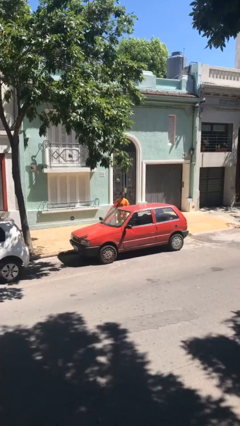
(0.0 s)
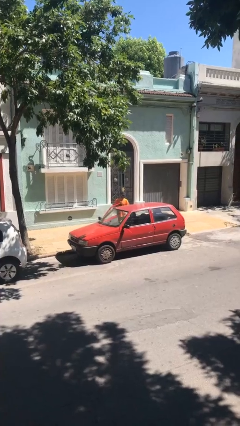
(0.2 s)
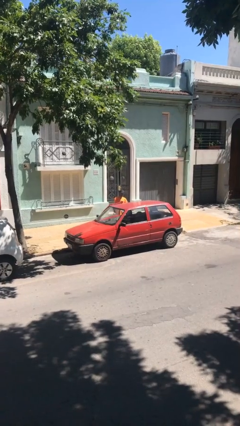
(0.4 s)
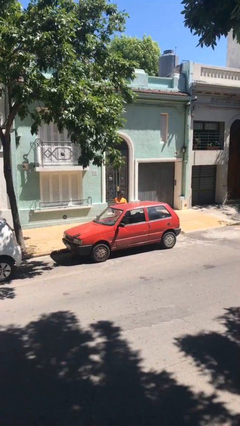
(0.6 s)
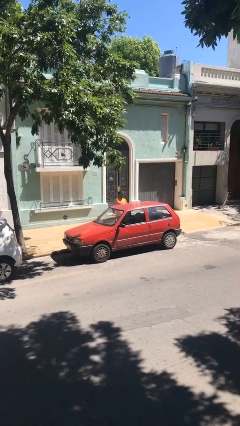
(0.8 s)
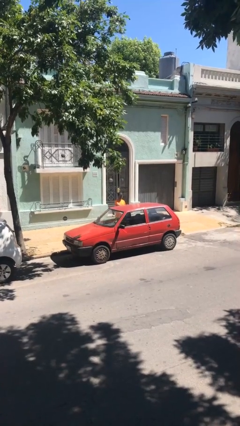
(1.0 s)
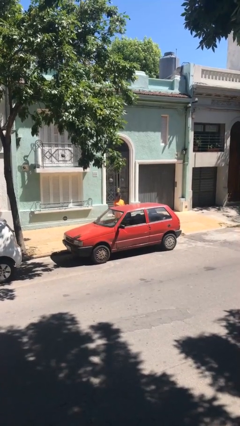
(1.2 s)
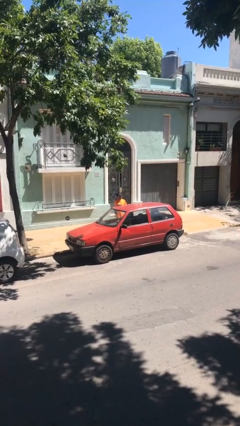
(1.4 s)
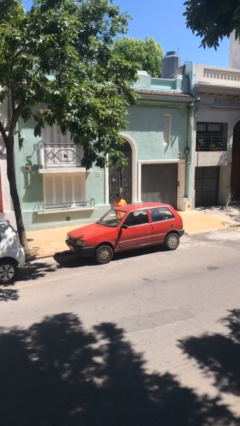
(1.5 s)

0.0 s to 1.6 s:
person closes car door

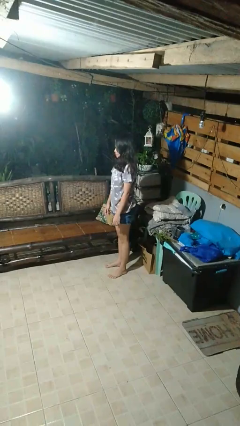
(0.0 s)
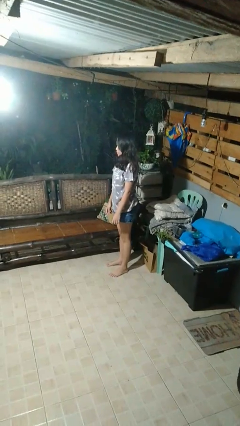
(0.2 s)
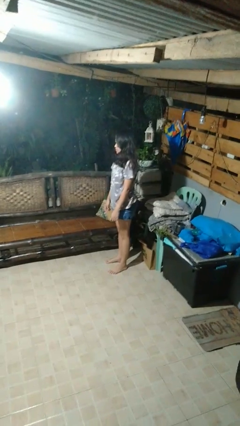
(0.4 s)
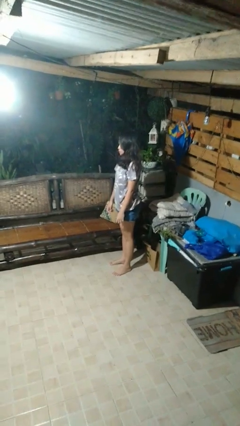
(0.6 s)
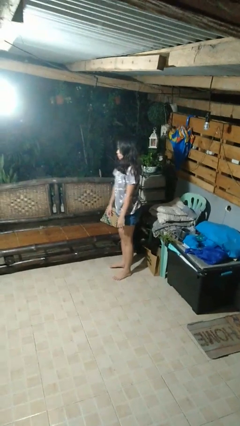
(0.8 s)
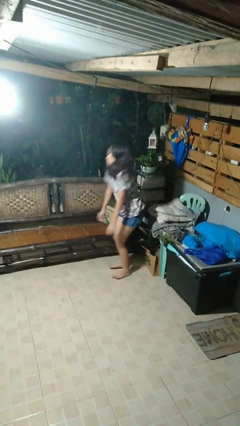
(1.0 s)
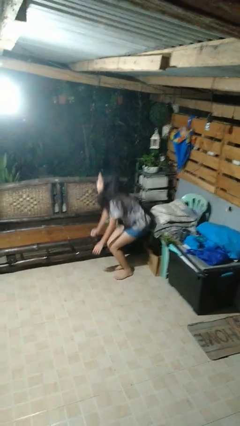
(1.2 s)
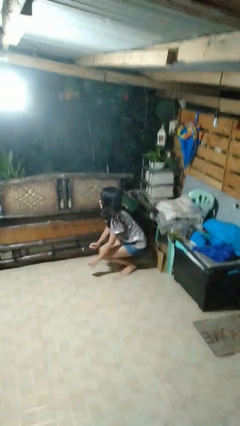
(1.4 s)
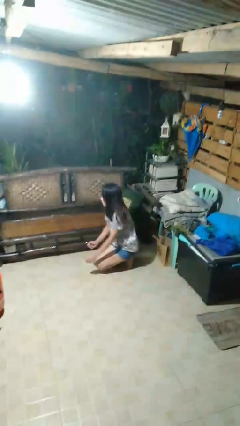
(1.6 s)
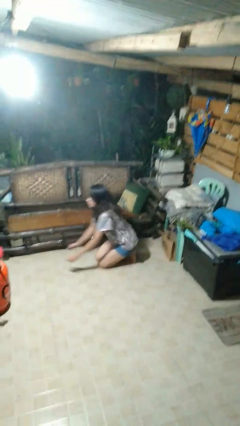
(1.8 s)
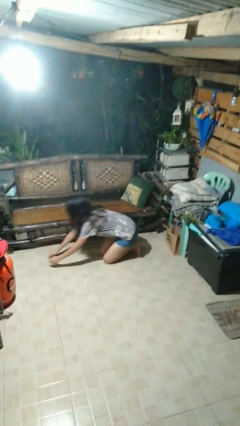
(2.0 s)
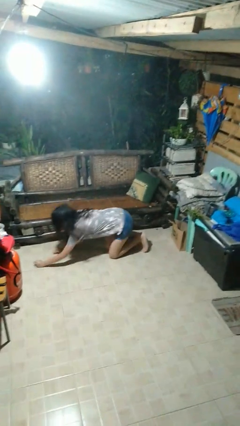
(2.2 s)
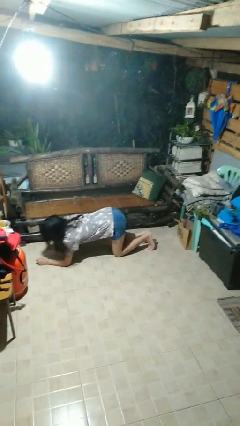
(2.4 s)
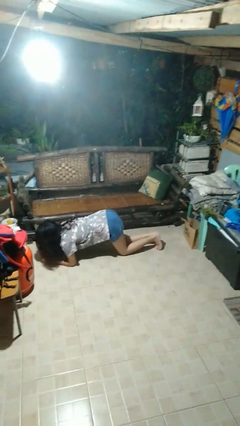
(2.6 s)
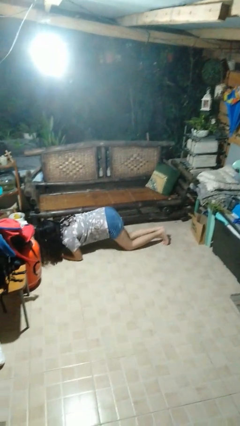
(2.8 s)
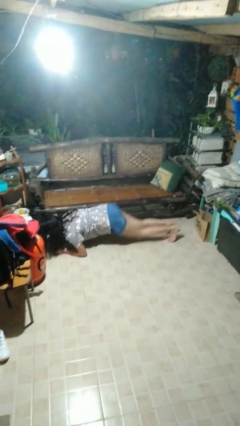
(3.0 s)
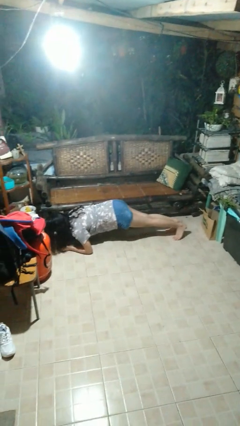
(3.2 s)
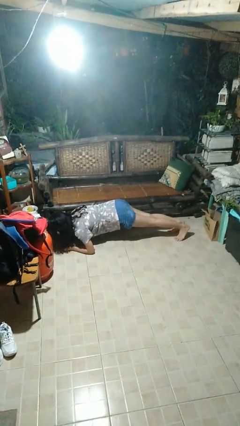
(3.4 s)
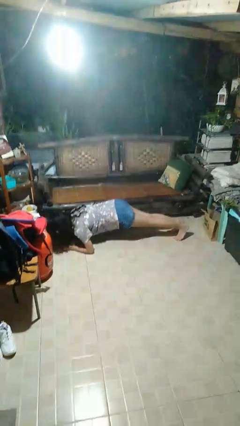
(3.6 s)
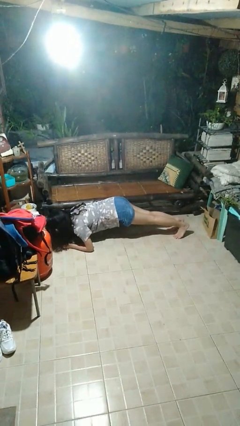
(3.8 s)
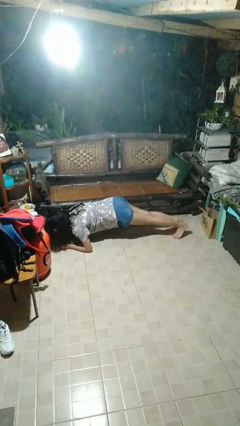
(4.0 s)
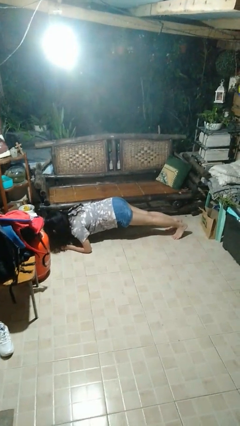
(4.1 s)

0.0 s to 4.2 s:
person exercises with plank

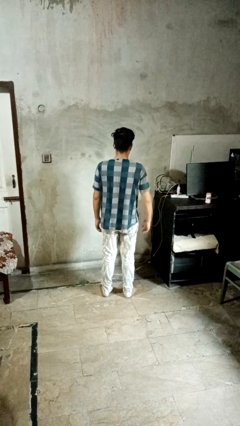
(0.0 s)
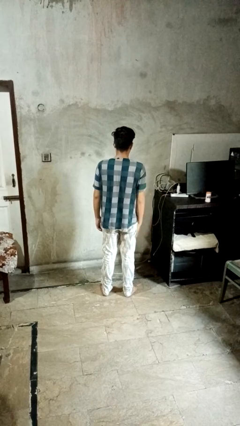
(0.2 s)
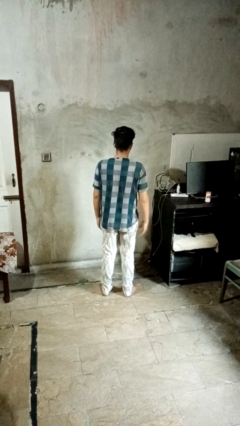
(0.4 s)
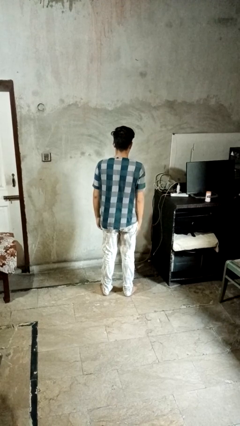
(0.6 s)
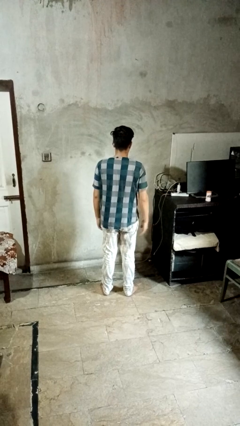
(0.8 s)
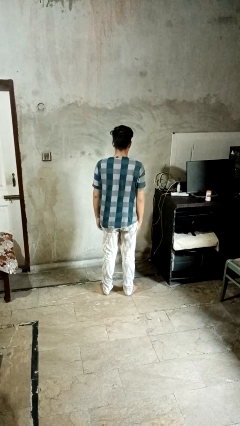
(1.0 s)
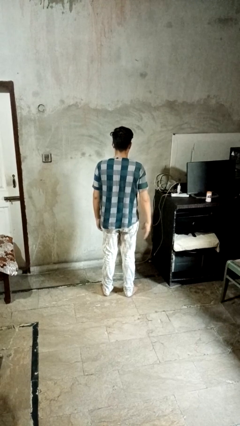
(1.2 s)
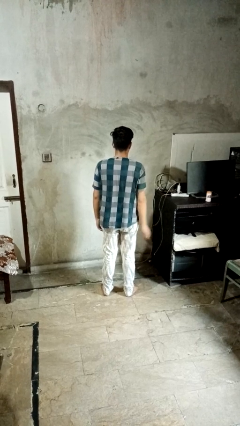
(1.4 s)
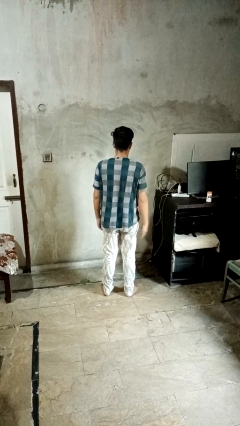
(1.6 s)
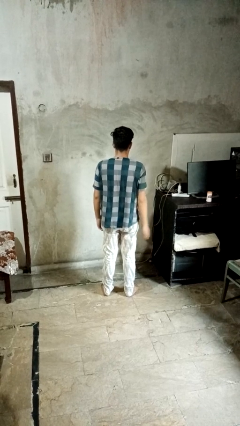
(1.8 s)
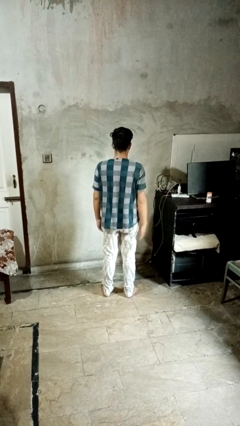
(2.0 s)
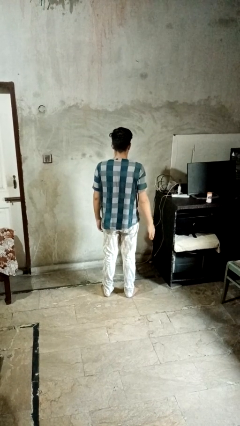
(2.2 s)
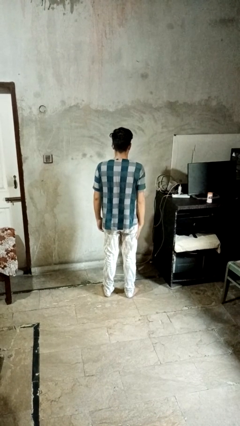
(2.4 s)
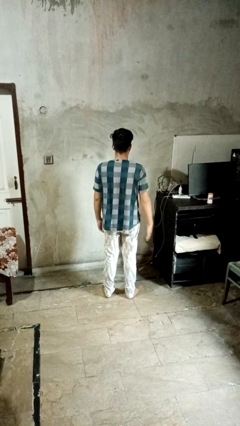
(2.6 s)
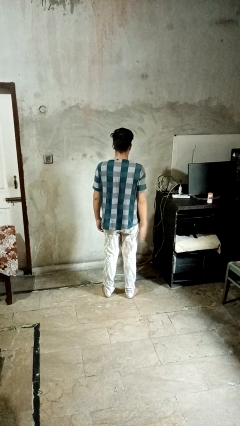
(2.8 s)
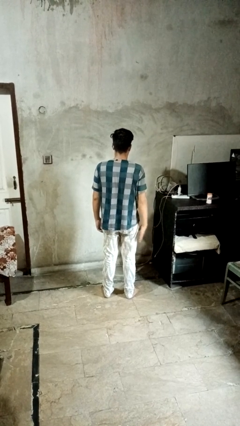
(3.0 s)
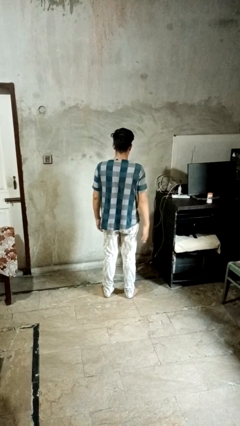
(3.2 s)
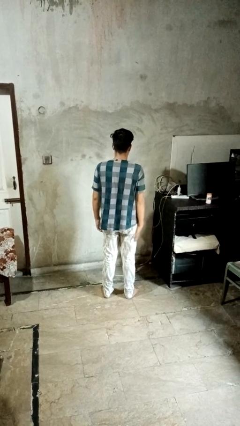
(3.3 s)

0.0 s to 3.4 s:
person slaps hands on thighs

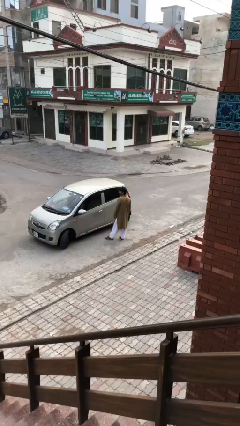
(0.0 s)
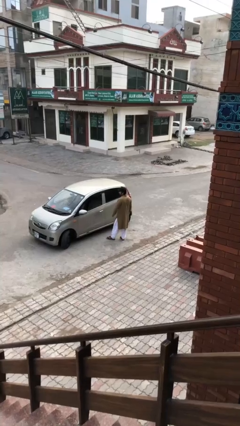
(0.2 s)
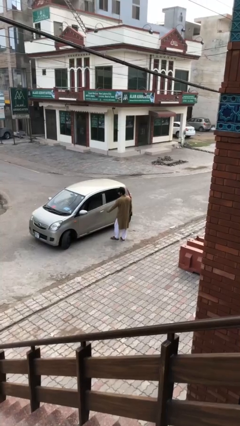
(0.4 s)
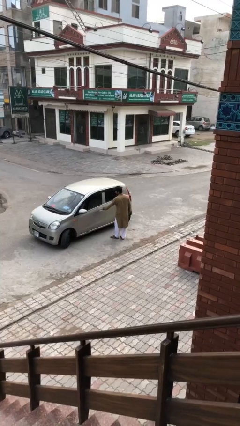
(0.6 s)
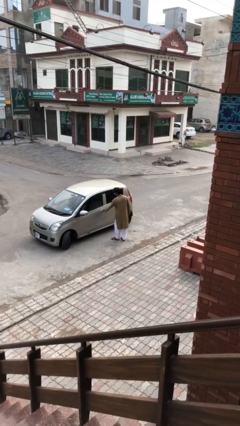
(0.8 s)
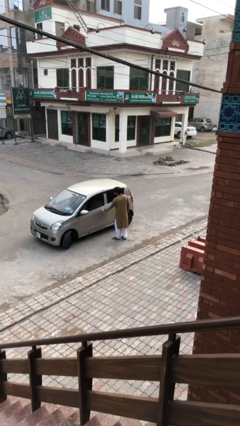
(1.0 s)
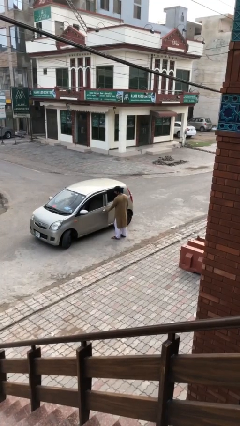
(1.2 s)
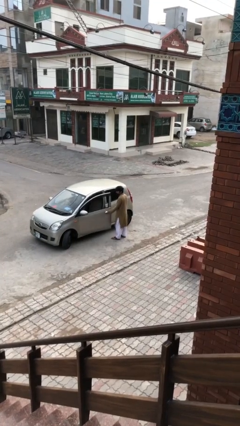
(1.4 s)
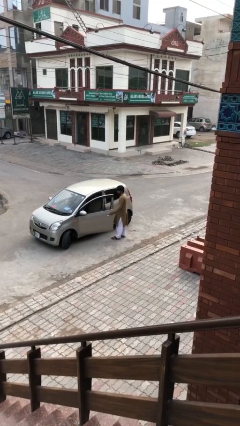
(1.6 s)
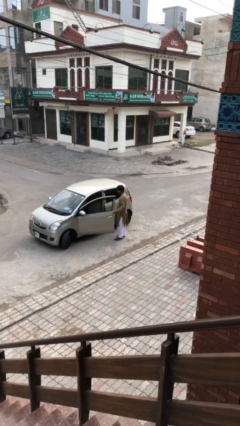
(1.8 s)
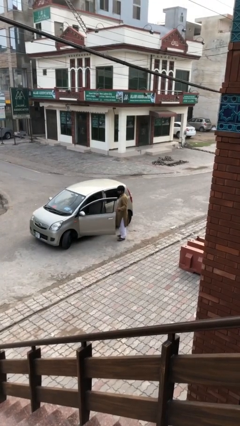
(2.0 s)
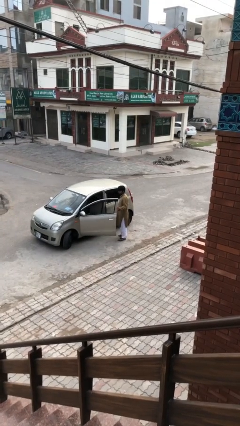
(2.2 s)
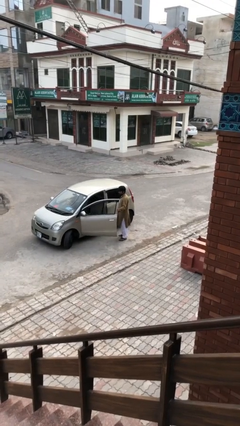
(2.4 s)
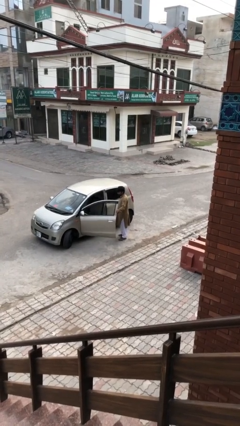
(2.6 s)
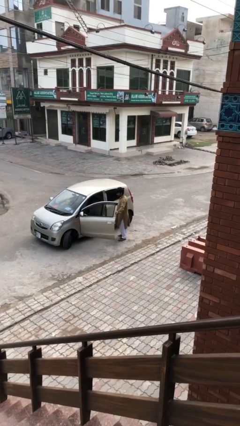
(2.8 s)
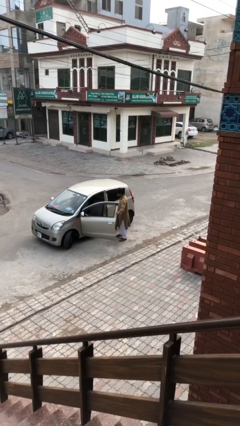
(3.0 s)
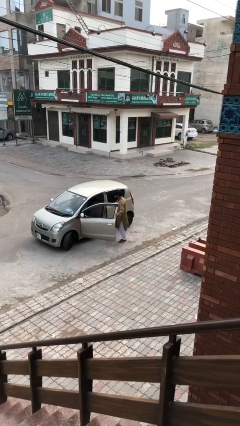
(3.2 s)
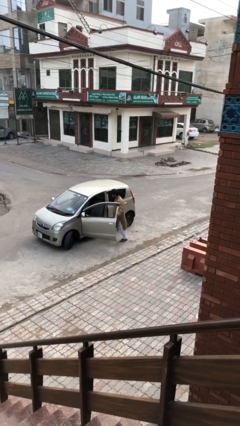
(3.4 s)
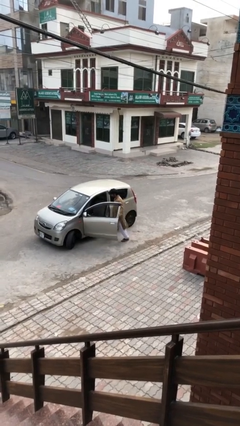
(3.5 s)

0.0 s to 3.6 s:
person opens car door

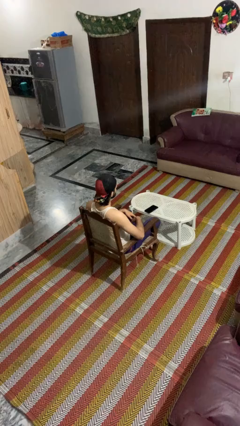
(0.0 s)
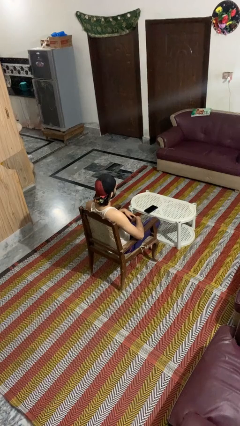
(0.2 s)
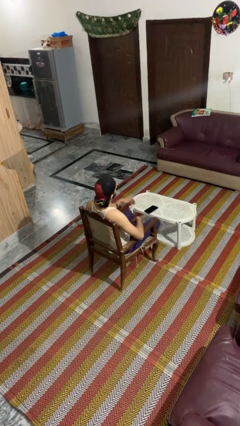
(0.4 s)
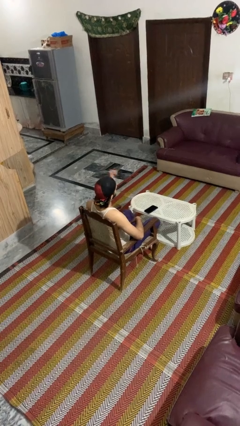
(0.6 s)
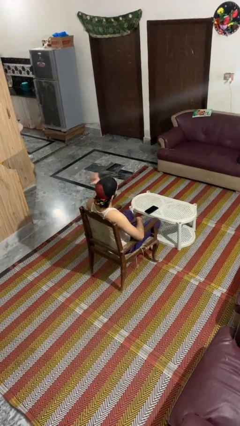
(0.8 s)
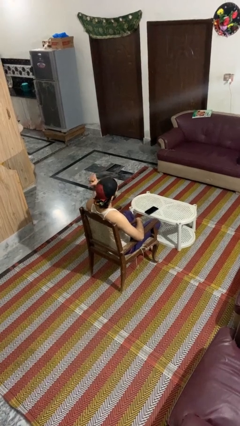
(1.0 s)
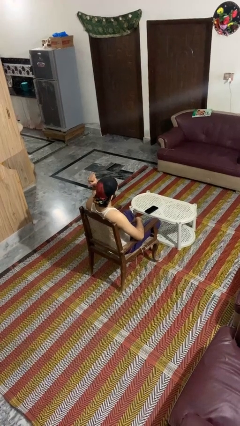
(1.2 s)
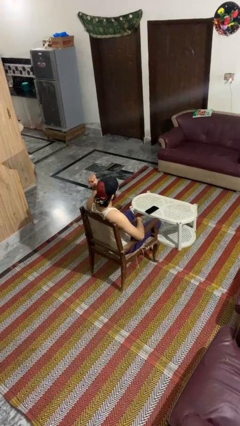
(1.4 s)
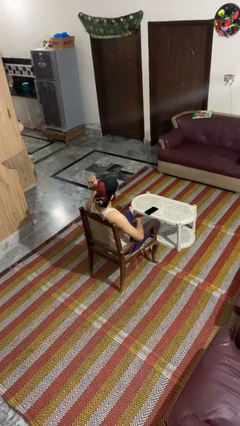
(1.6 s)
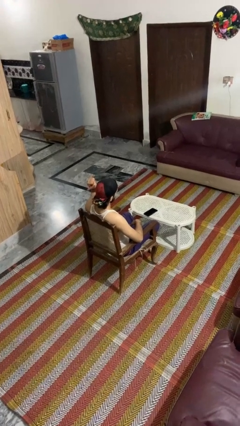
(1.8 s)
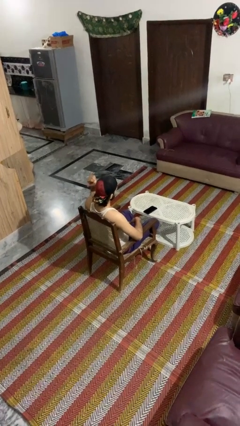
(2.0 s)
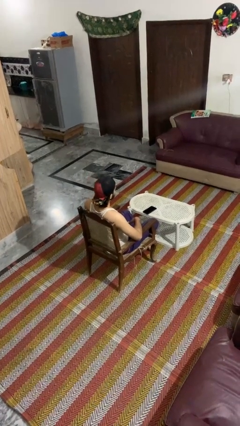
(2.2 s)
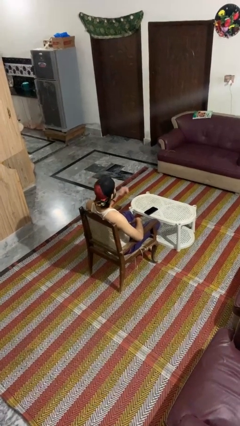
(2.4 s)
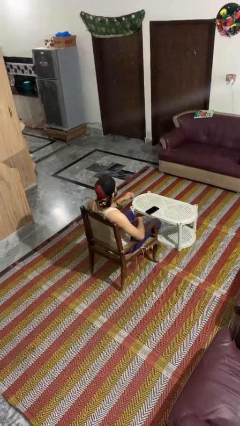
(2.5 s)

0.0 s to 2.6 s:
person gestures behind me

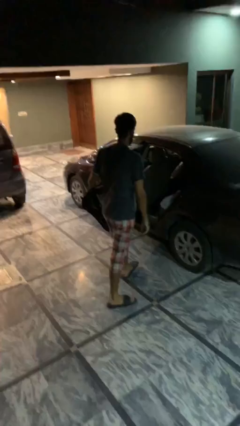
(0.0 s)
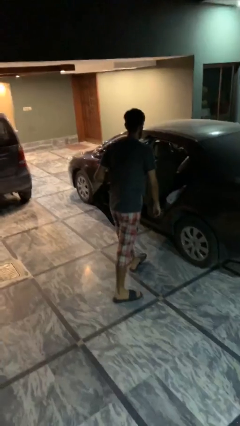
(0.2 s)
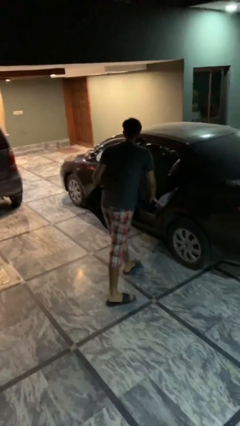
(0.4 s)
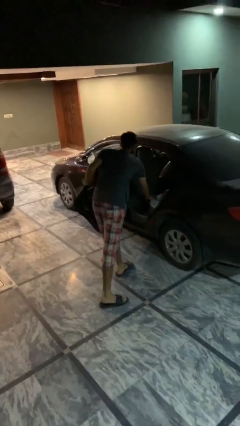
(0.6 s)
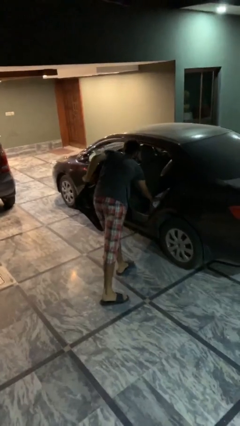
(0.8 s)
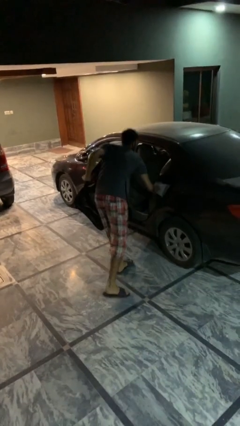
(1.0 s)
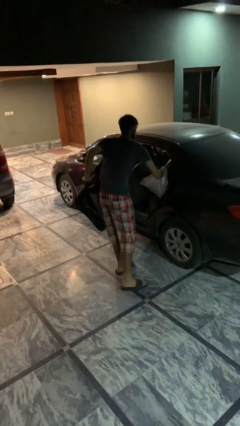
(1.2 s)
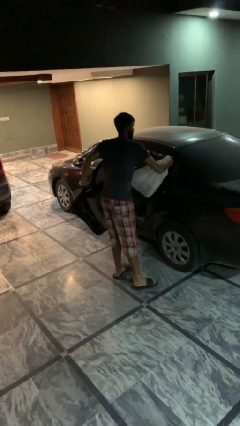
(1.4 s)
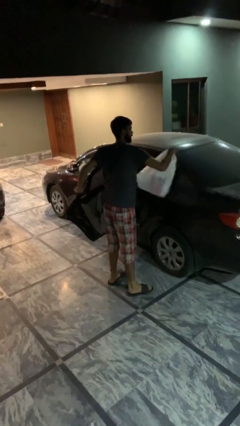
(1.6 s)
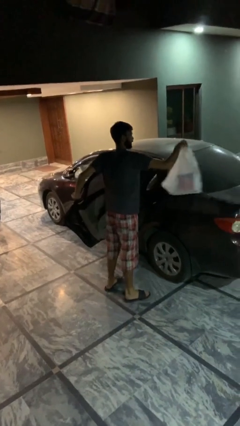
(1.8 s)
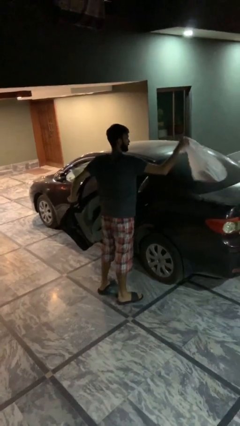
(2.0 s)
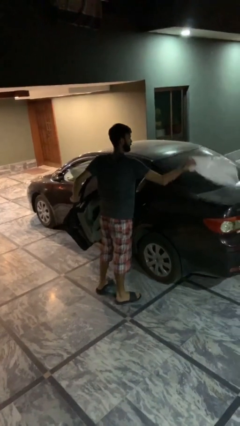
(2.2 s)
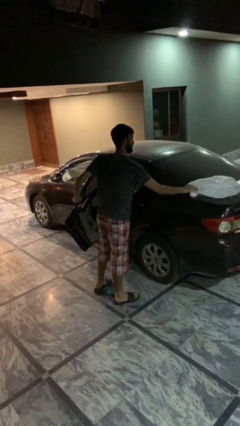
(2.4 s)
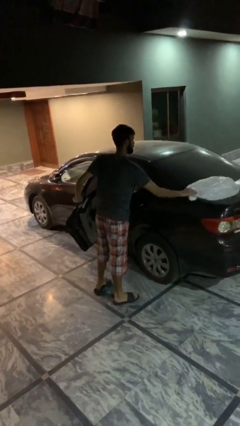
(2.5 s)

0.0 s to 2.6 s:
person unloads car
